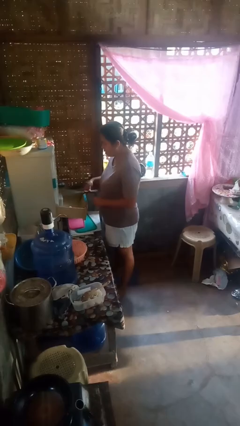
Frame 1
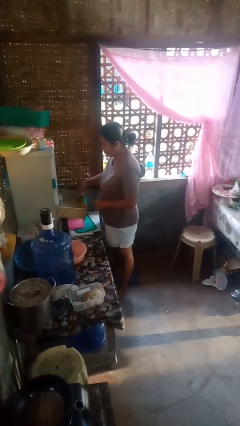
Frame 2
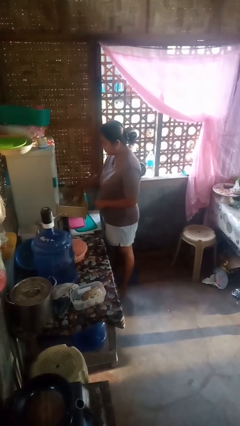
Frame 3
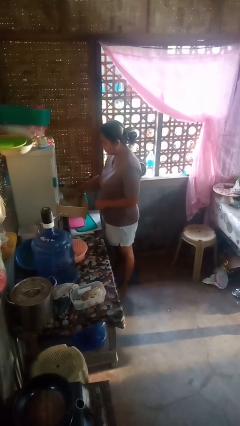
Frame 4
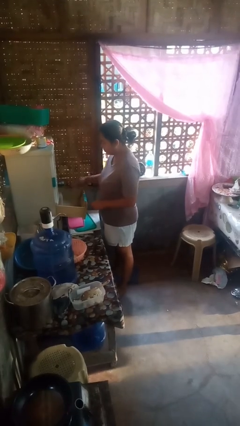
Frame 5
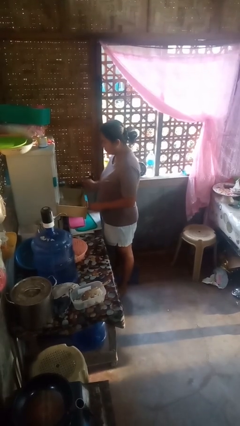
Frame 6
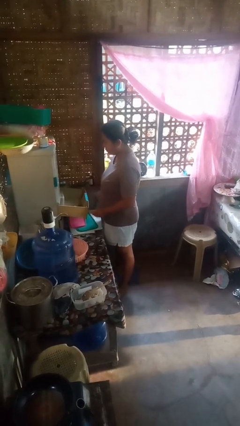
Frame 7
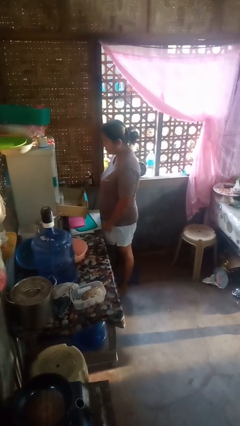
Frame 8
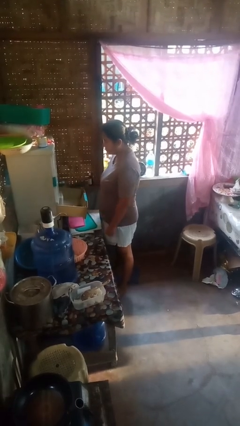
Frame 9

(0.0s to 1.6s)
person puts object into kitchen drawer

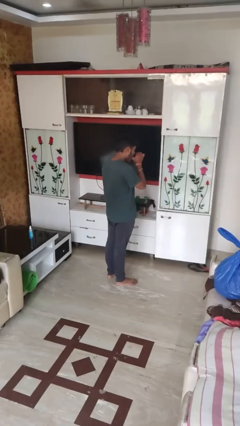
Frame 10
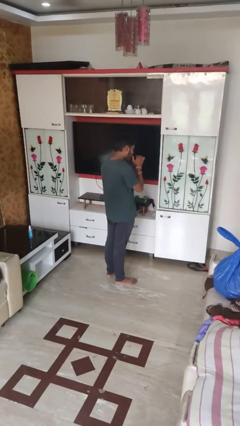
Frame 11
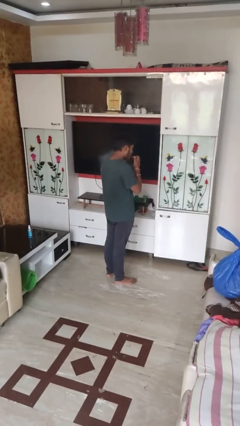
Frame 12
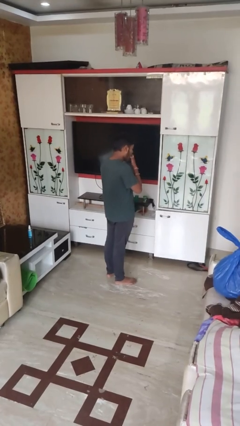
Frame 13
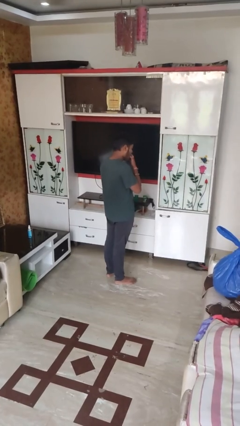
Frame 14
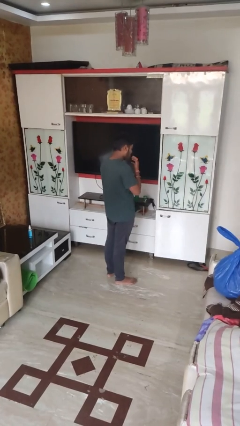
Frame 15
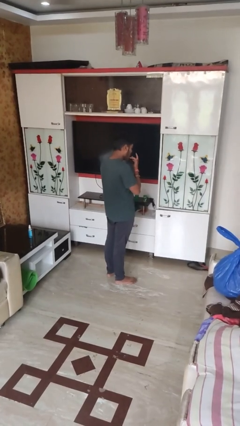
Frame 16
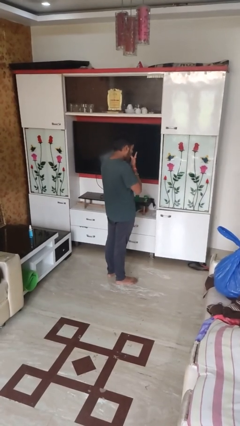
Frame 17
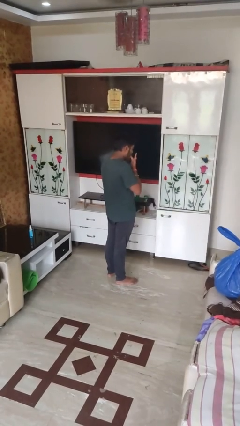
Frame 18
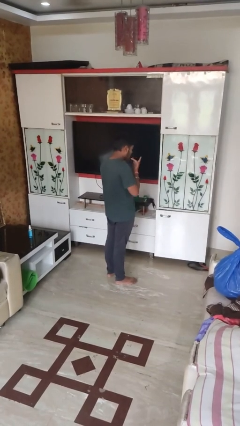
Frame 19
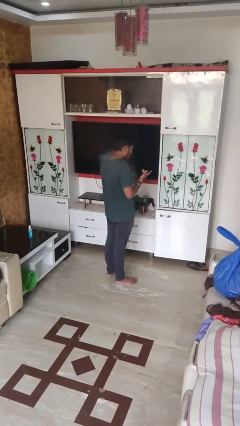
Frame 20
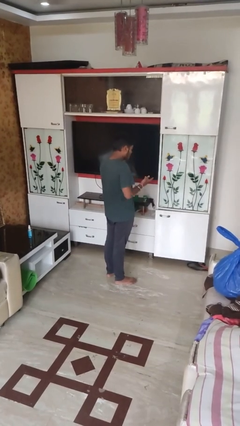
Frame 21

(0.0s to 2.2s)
person licks fingers

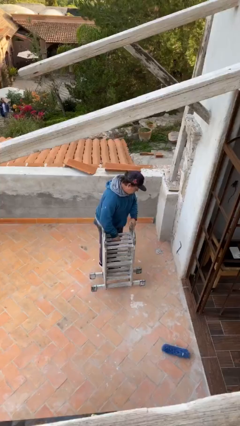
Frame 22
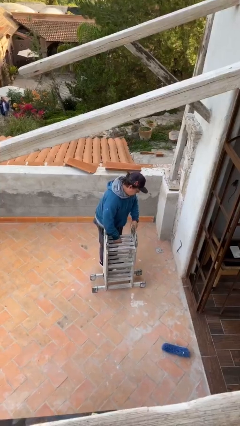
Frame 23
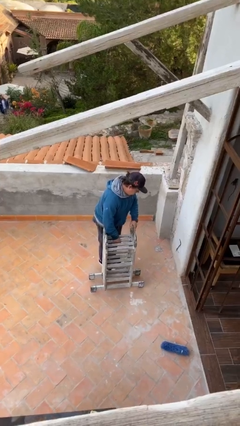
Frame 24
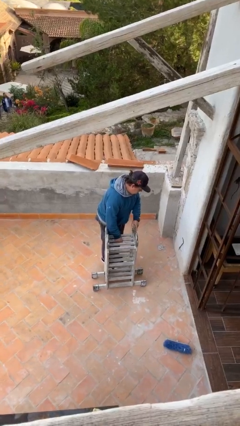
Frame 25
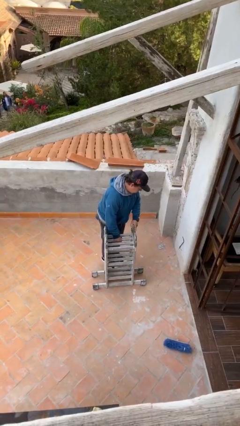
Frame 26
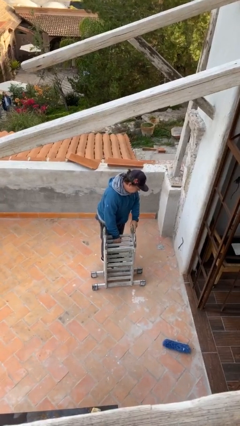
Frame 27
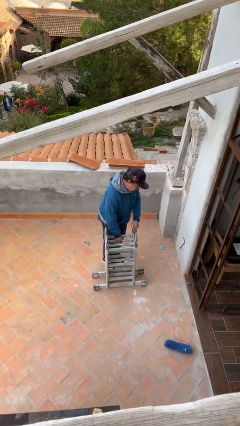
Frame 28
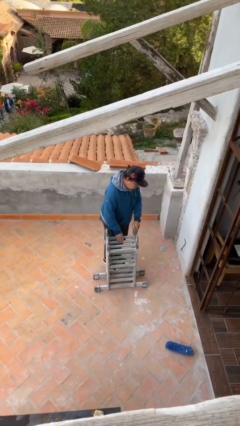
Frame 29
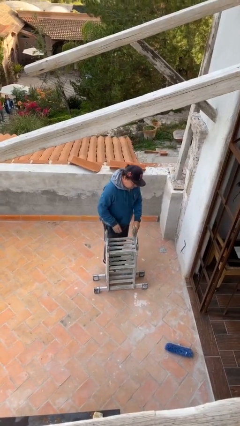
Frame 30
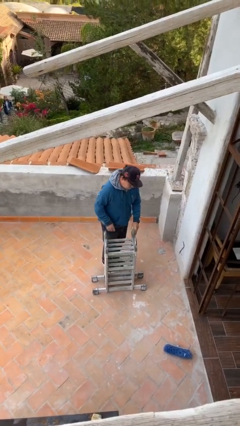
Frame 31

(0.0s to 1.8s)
person puts down object on floor

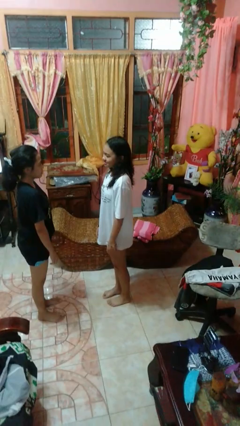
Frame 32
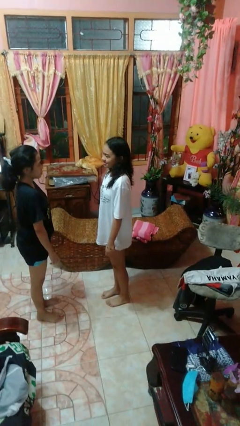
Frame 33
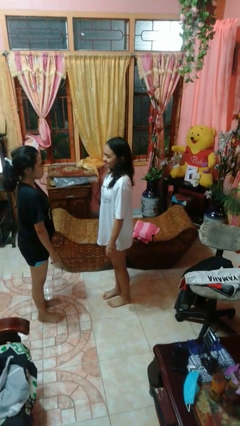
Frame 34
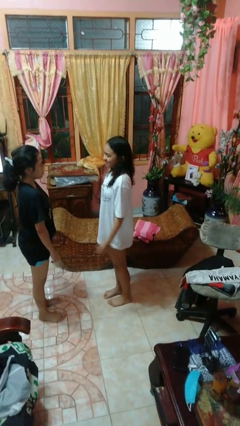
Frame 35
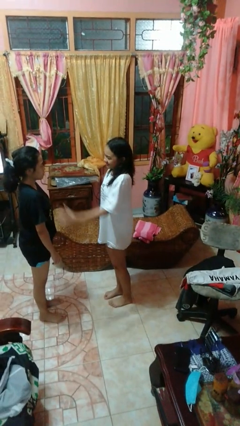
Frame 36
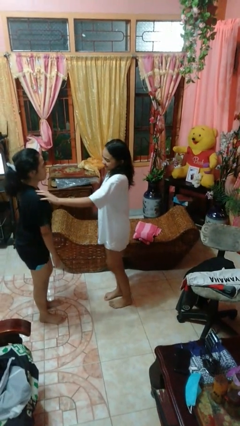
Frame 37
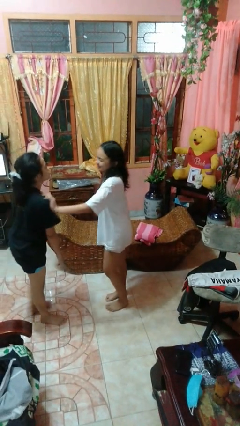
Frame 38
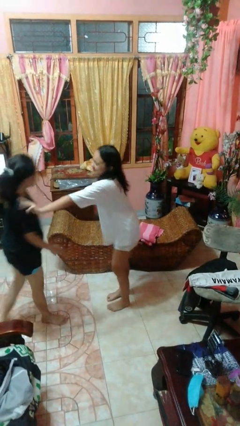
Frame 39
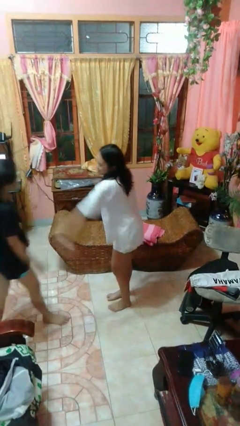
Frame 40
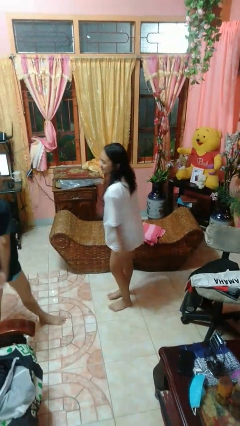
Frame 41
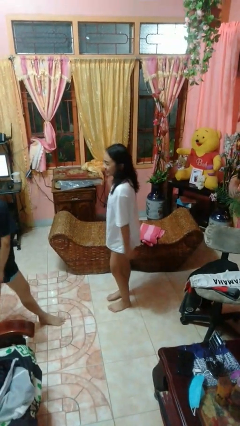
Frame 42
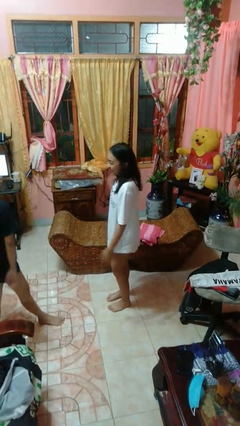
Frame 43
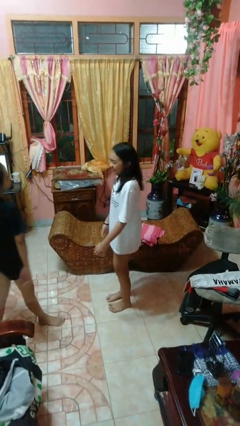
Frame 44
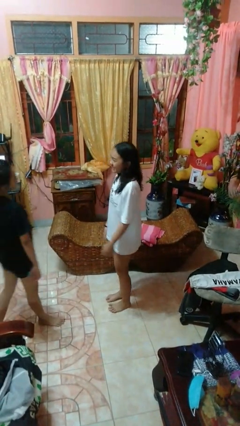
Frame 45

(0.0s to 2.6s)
person shoves person

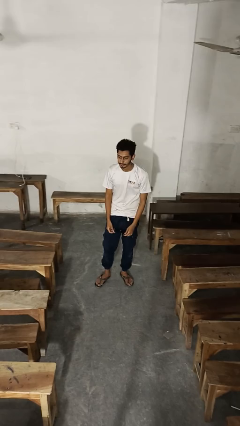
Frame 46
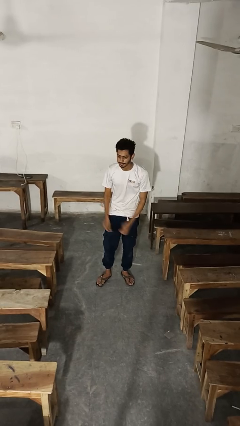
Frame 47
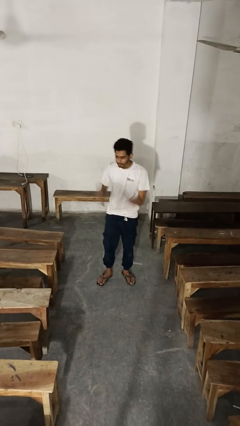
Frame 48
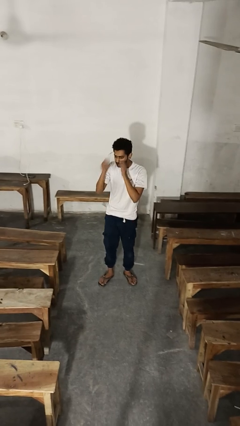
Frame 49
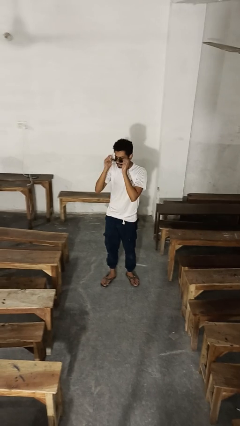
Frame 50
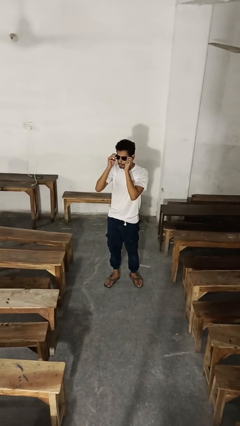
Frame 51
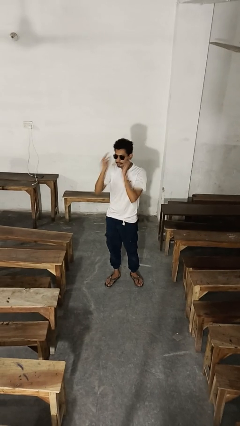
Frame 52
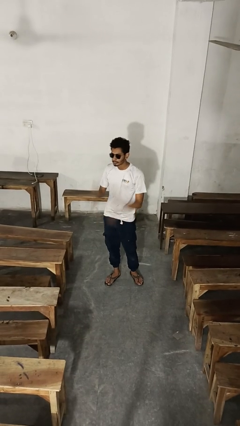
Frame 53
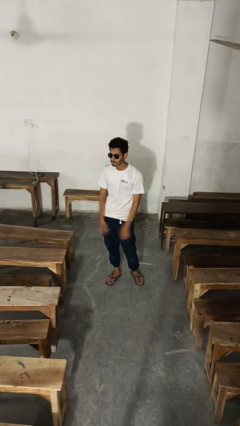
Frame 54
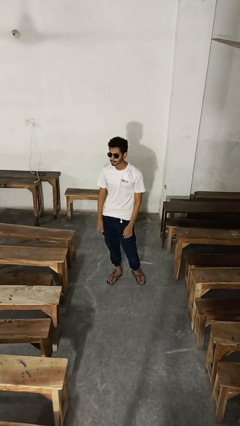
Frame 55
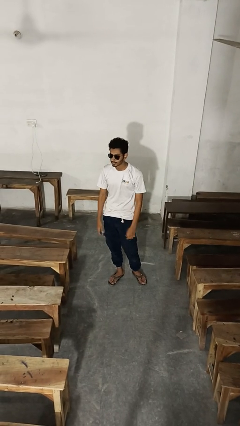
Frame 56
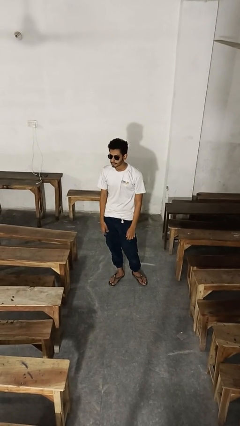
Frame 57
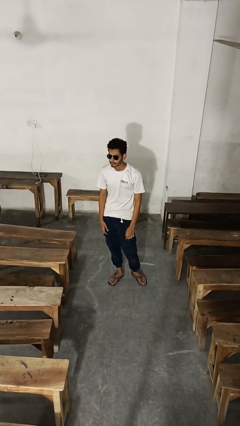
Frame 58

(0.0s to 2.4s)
person puts on sunglasses

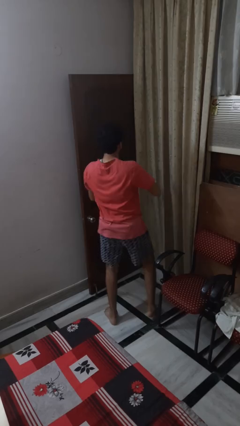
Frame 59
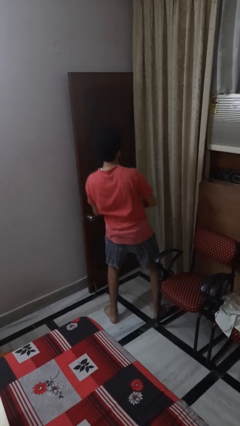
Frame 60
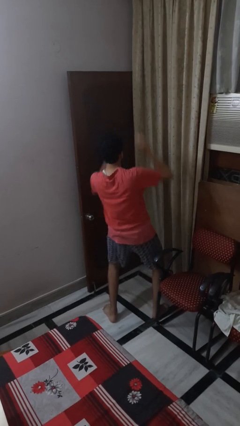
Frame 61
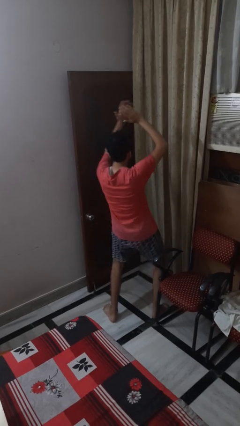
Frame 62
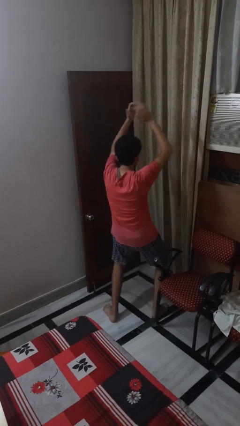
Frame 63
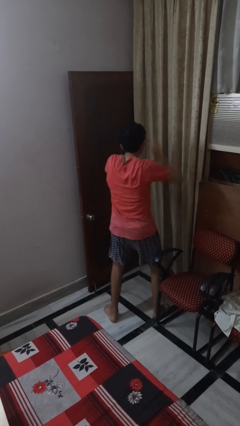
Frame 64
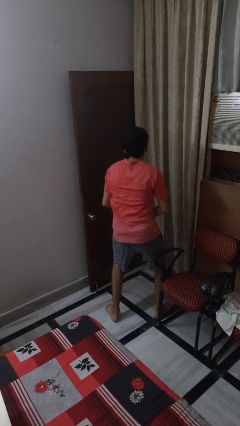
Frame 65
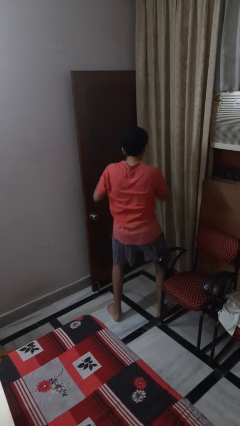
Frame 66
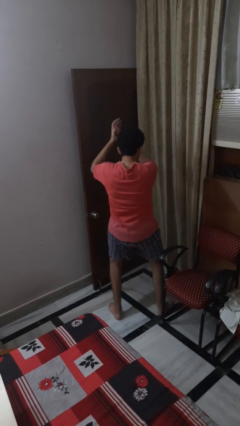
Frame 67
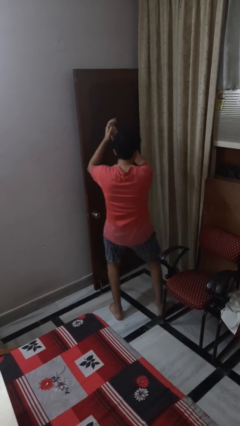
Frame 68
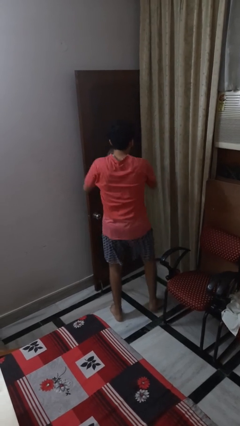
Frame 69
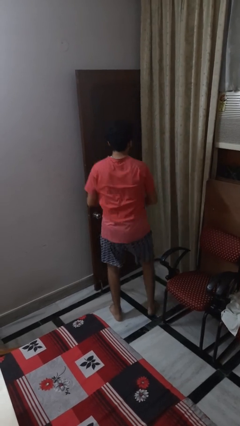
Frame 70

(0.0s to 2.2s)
person dances in place

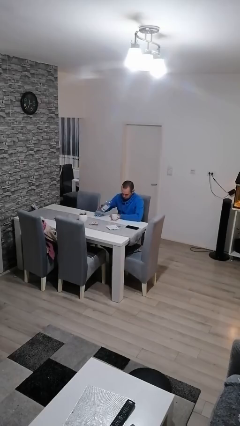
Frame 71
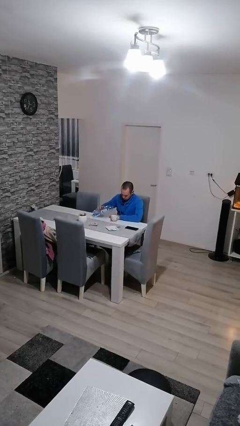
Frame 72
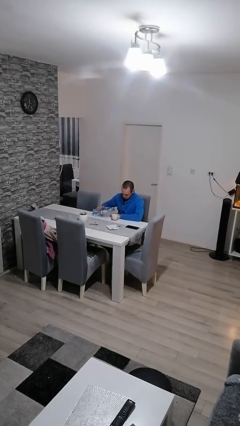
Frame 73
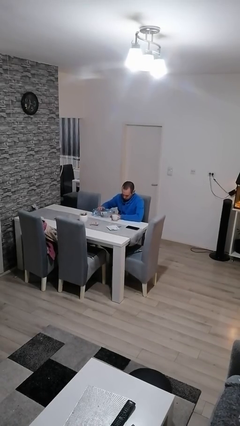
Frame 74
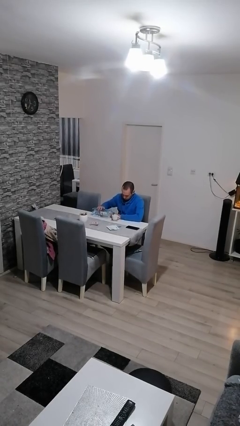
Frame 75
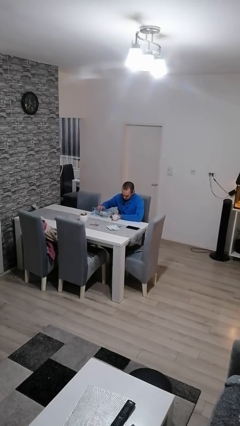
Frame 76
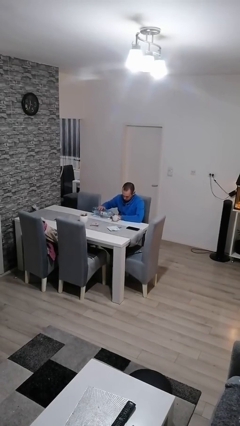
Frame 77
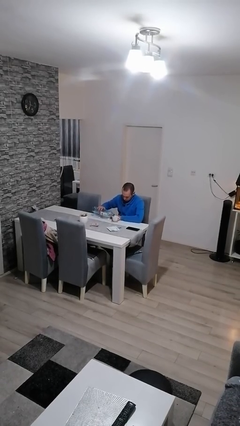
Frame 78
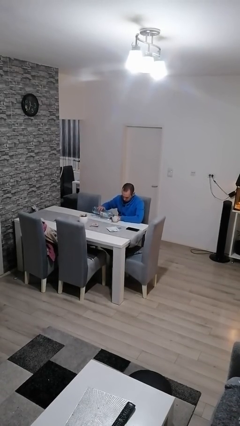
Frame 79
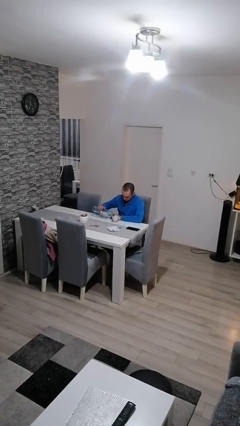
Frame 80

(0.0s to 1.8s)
person pours liquid into cup

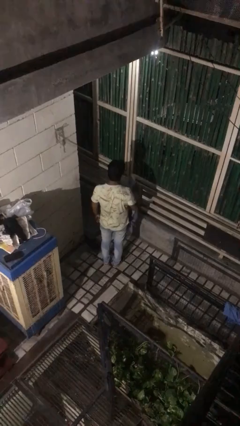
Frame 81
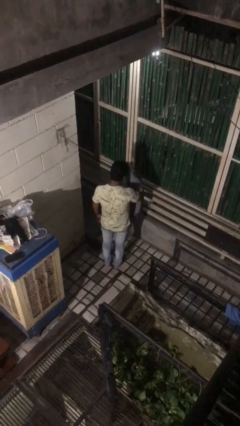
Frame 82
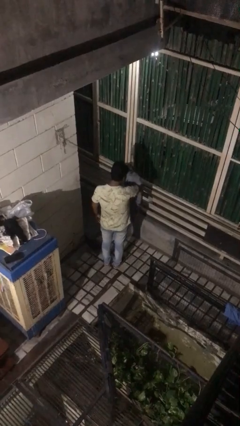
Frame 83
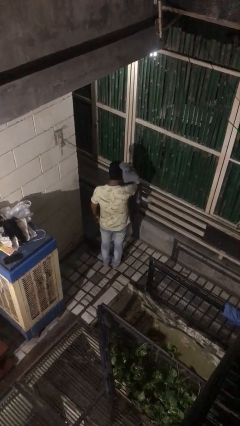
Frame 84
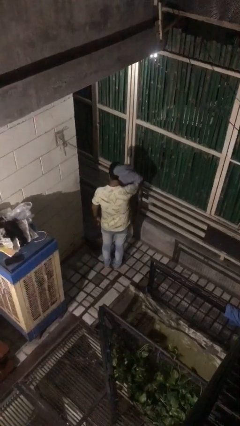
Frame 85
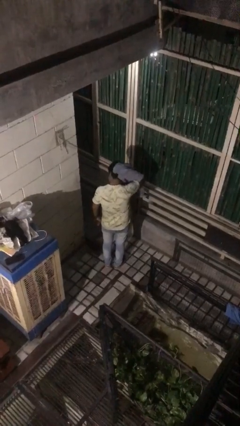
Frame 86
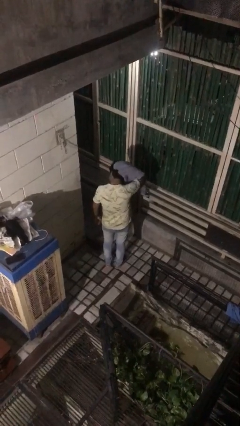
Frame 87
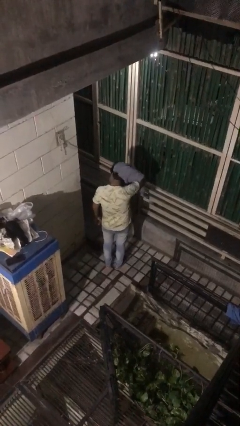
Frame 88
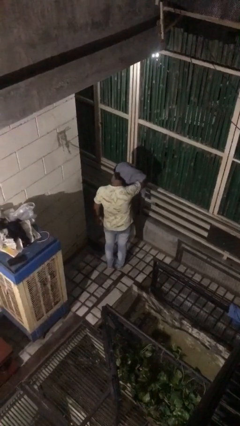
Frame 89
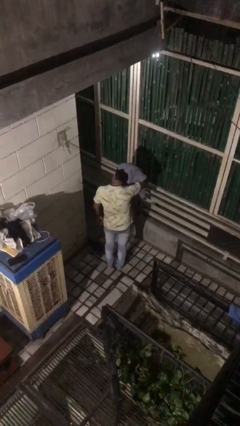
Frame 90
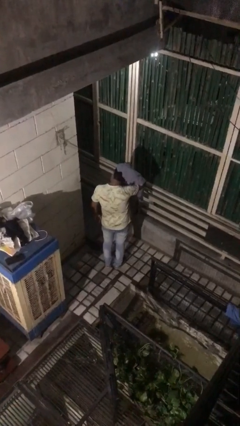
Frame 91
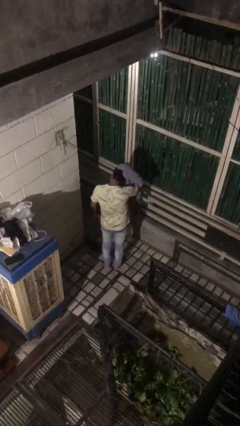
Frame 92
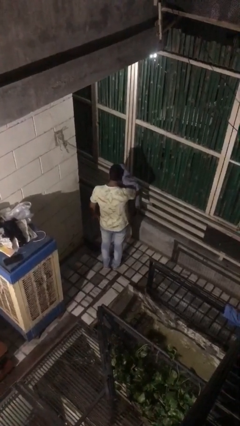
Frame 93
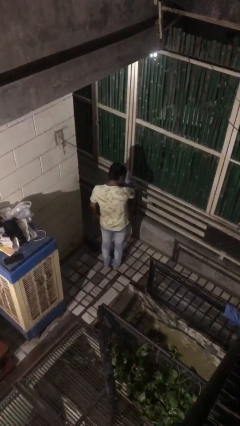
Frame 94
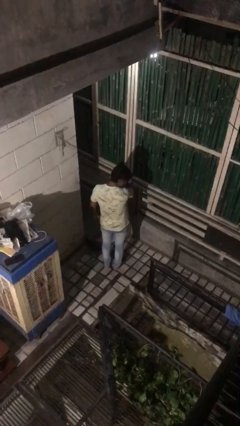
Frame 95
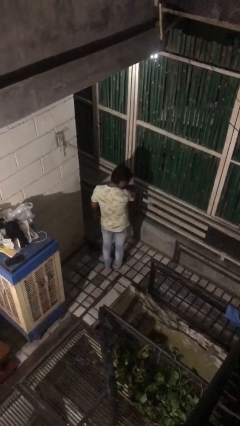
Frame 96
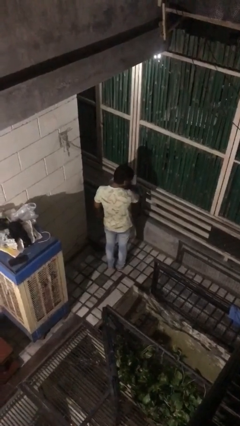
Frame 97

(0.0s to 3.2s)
person dries hair with towel
